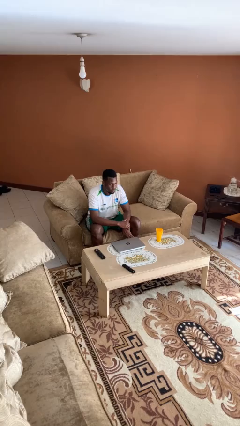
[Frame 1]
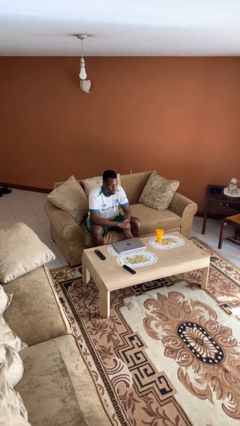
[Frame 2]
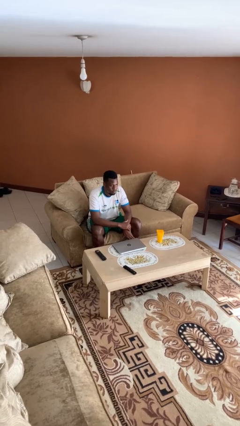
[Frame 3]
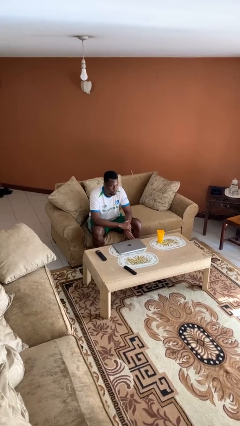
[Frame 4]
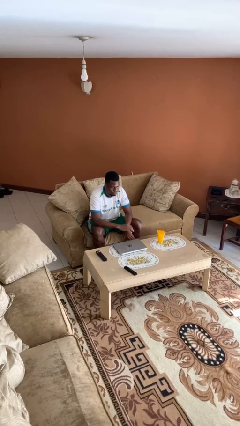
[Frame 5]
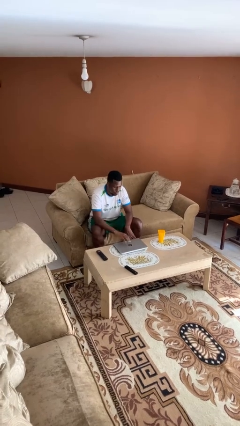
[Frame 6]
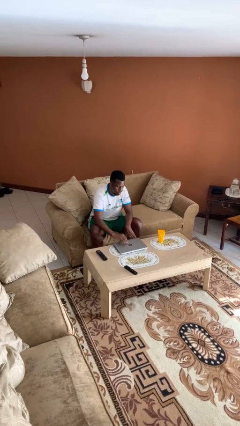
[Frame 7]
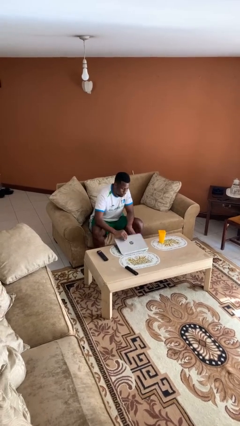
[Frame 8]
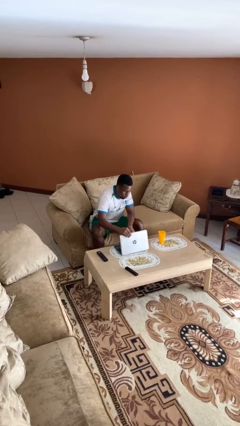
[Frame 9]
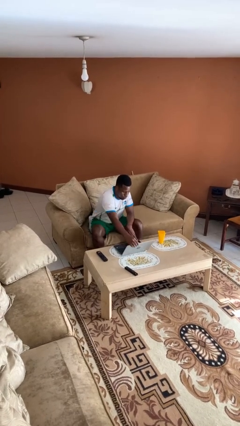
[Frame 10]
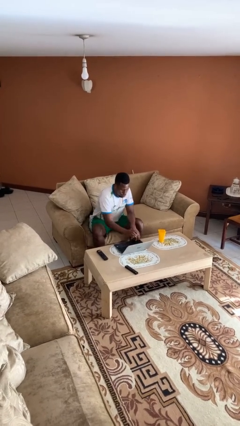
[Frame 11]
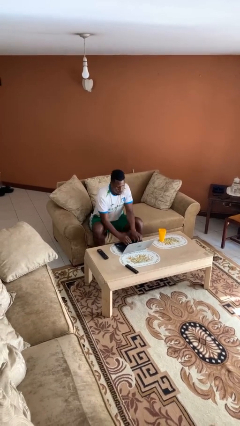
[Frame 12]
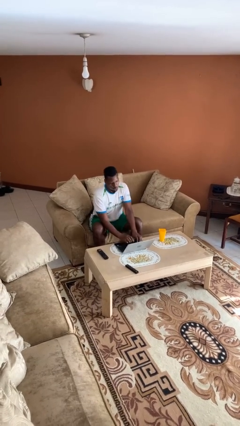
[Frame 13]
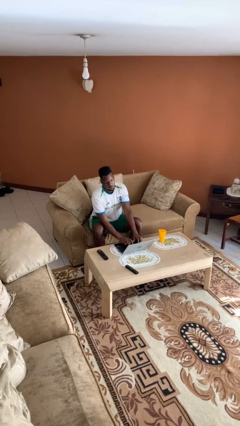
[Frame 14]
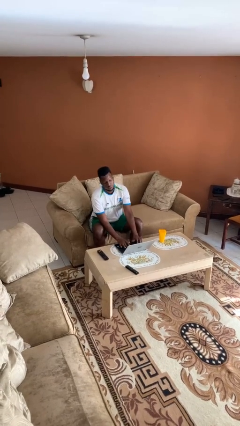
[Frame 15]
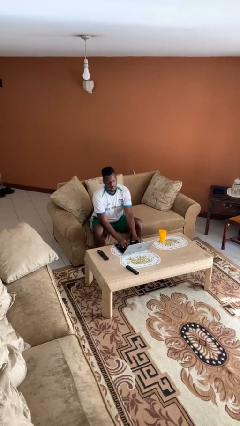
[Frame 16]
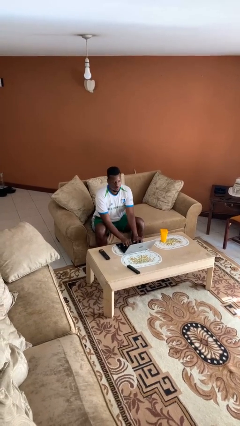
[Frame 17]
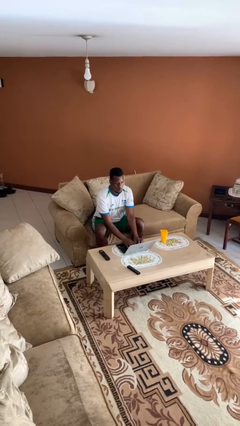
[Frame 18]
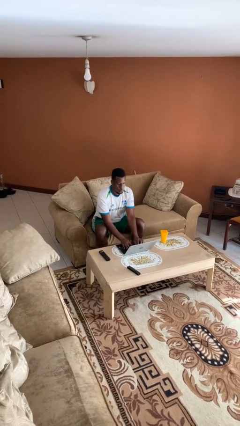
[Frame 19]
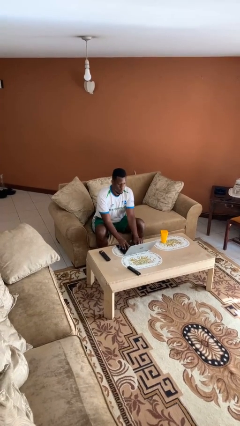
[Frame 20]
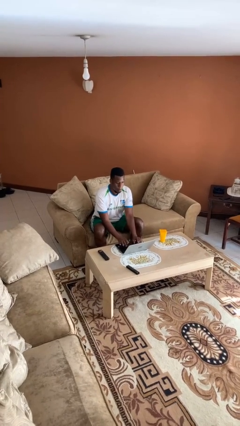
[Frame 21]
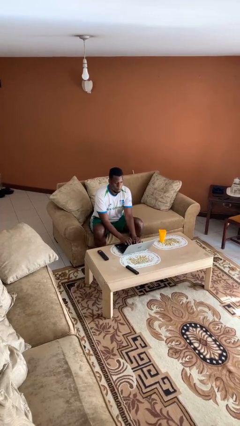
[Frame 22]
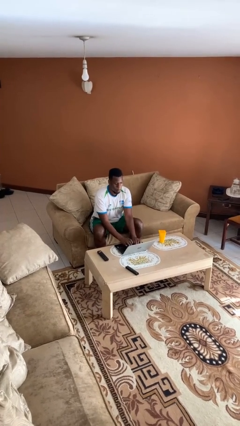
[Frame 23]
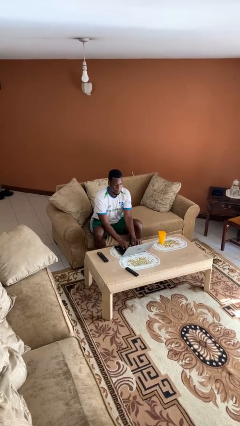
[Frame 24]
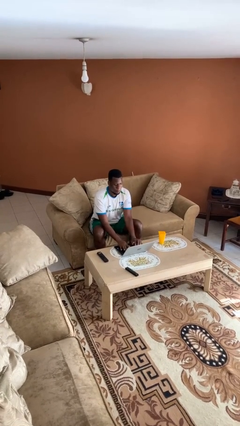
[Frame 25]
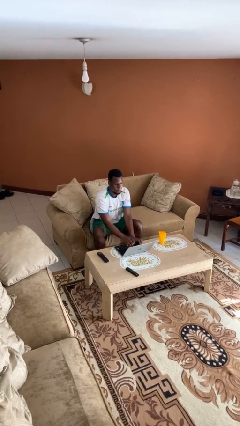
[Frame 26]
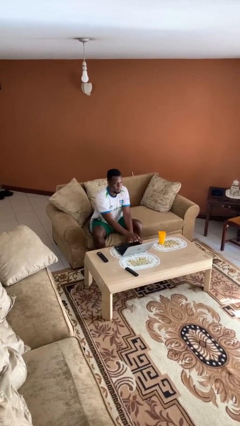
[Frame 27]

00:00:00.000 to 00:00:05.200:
person interacts with laptop

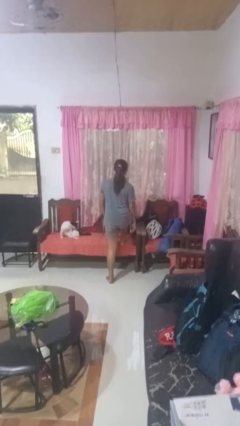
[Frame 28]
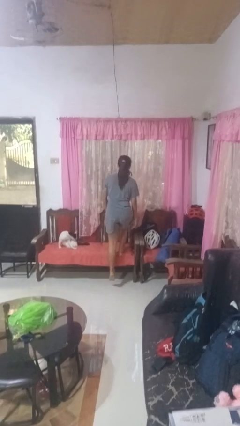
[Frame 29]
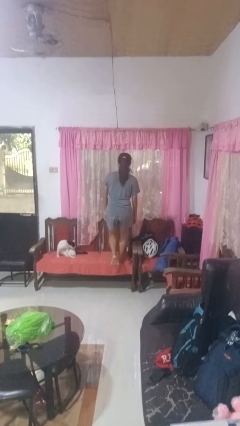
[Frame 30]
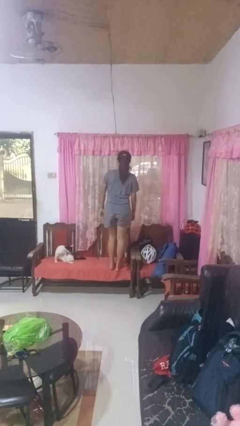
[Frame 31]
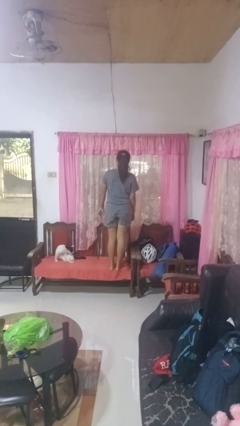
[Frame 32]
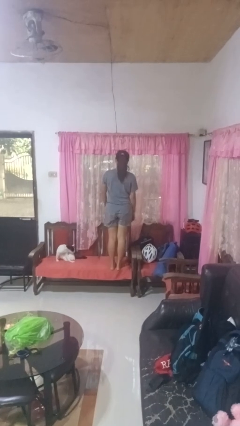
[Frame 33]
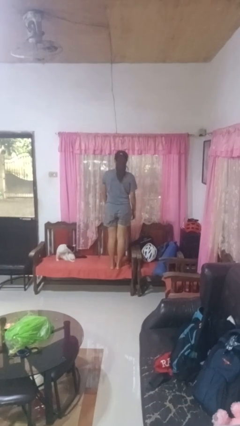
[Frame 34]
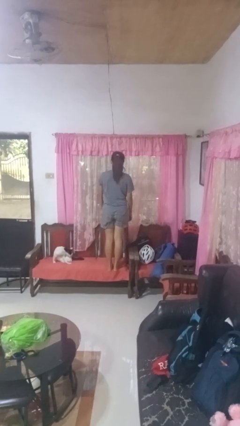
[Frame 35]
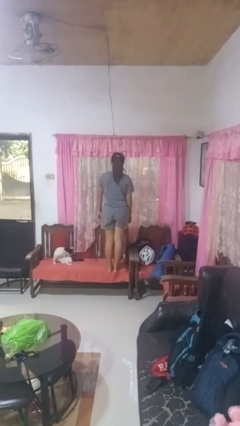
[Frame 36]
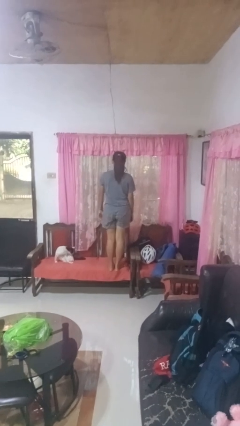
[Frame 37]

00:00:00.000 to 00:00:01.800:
person climbs on chair

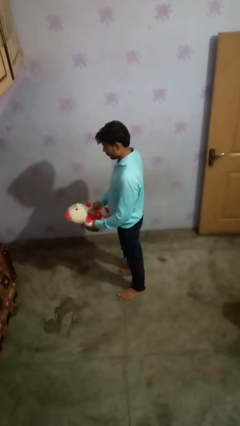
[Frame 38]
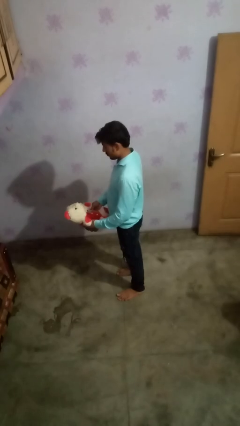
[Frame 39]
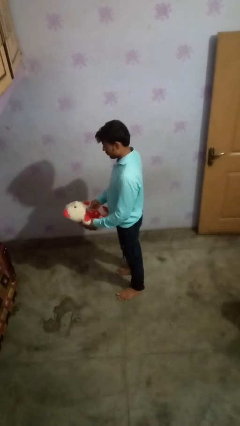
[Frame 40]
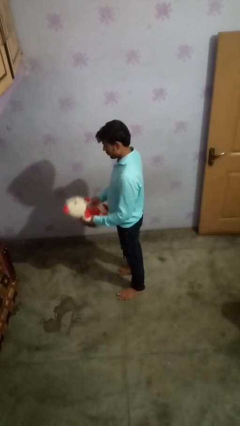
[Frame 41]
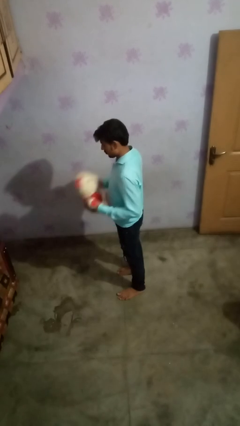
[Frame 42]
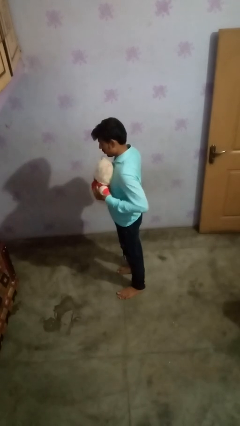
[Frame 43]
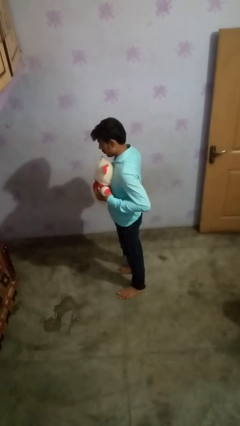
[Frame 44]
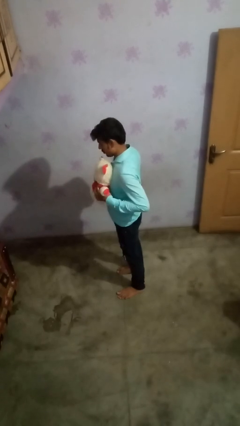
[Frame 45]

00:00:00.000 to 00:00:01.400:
person hugs stuffed animal

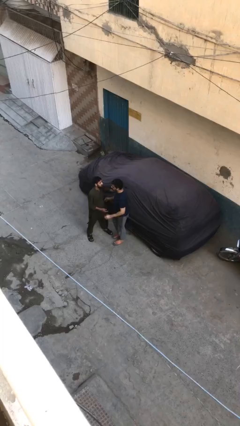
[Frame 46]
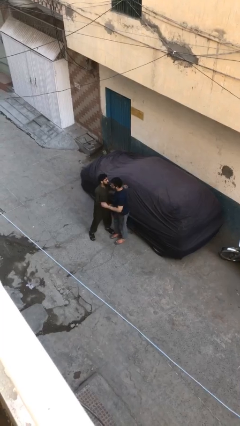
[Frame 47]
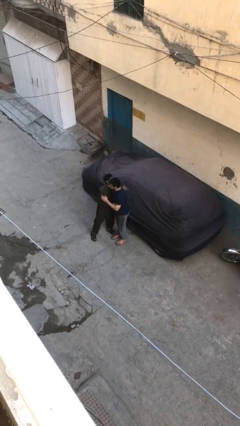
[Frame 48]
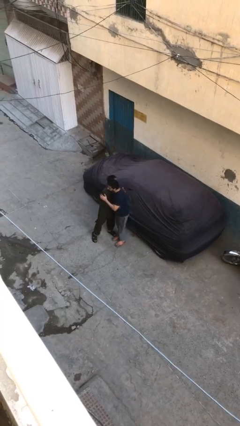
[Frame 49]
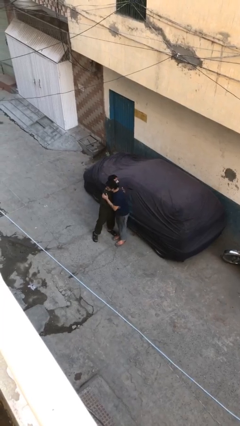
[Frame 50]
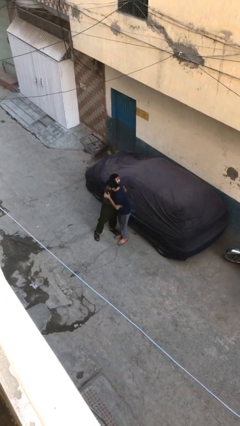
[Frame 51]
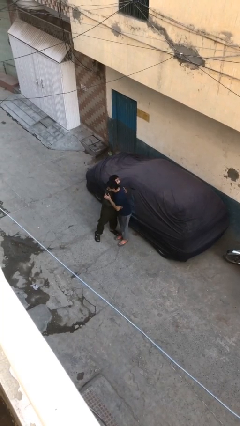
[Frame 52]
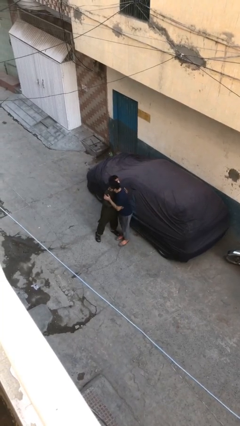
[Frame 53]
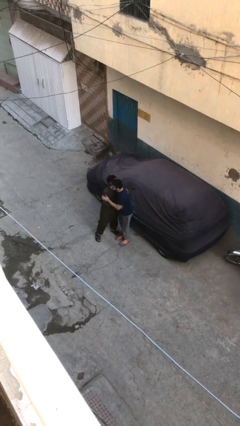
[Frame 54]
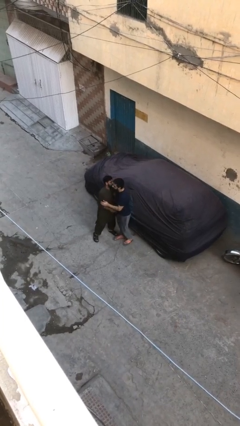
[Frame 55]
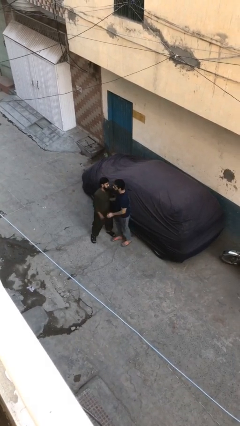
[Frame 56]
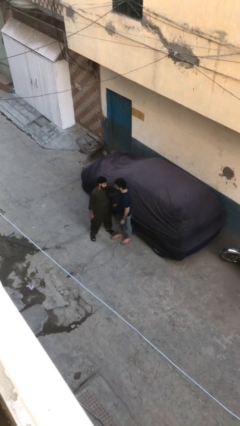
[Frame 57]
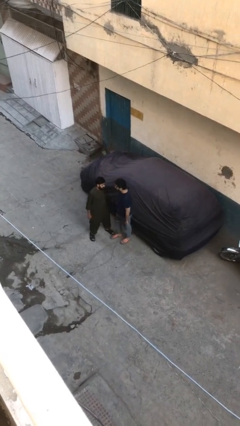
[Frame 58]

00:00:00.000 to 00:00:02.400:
person embraces person

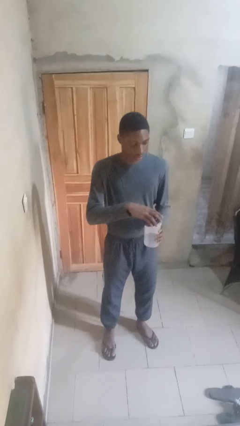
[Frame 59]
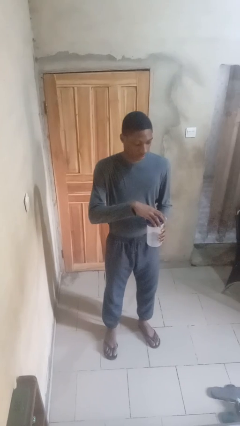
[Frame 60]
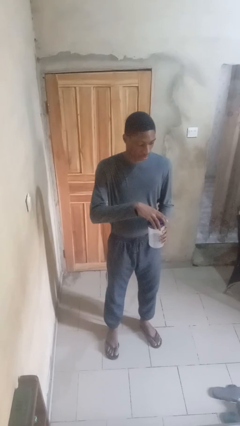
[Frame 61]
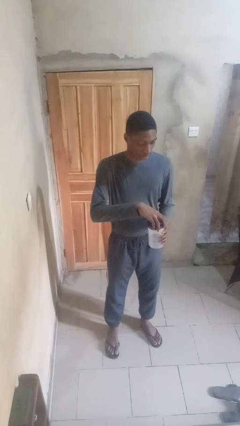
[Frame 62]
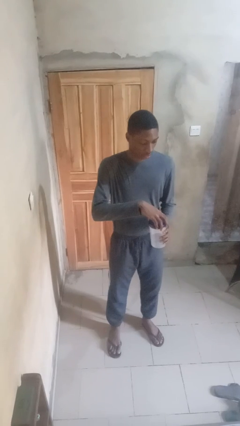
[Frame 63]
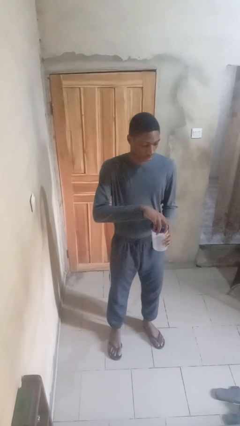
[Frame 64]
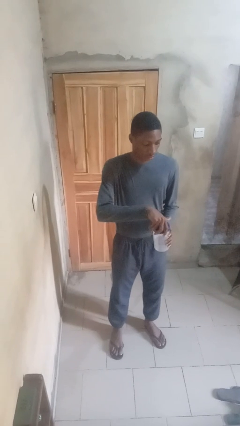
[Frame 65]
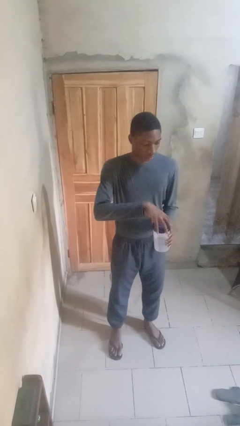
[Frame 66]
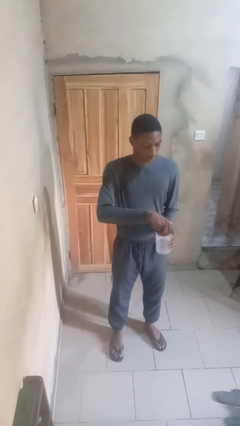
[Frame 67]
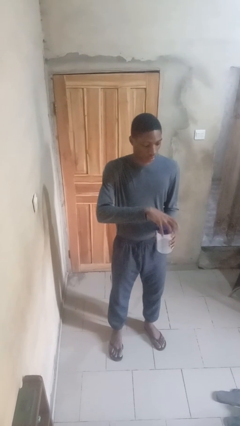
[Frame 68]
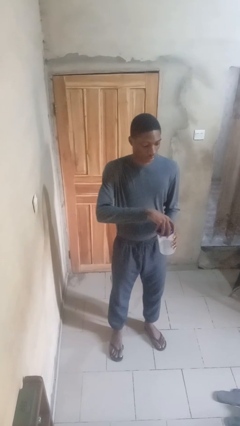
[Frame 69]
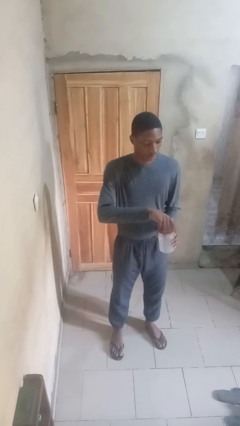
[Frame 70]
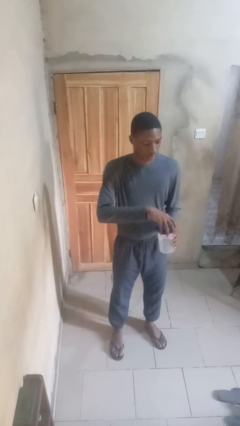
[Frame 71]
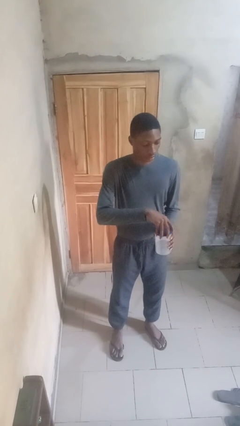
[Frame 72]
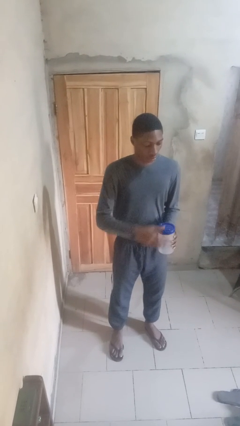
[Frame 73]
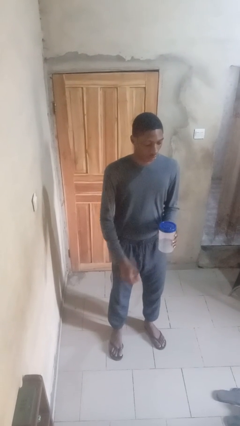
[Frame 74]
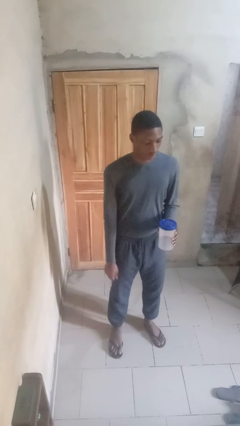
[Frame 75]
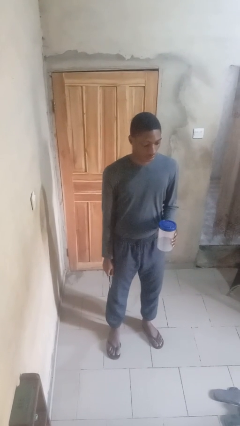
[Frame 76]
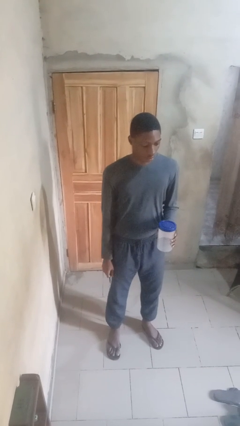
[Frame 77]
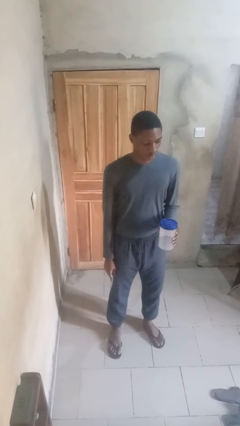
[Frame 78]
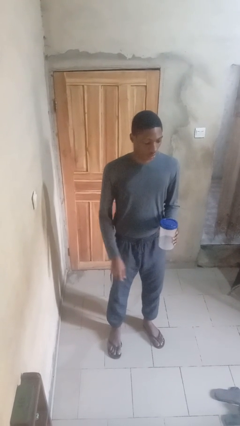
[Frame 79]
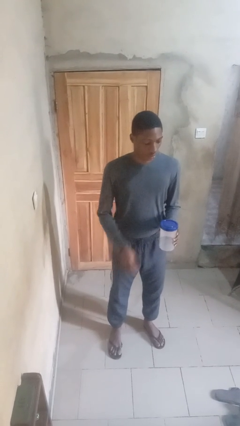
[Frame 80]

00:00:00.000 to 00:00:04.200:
person closes jar

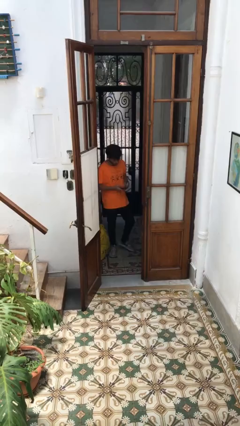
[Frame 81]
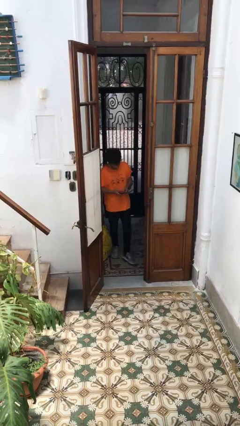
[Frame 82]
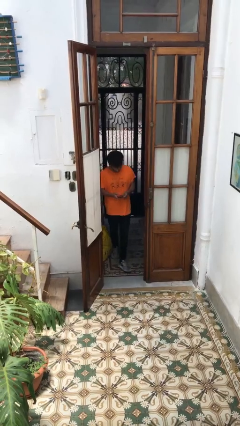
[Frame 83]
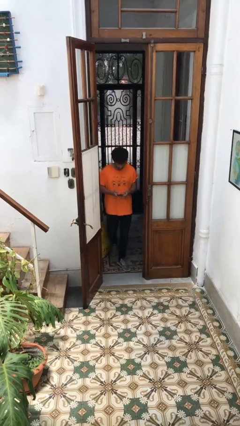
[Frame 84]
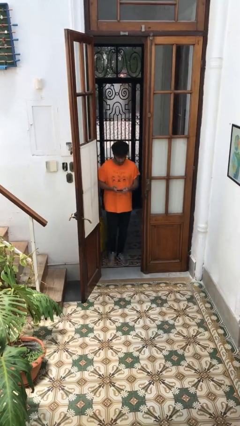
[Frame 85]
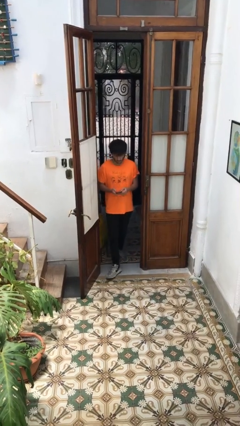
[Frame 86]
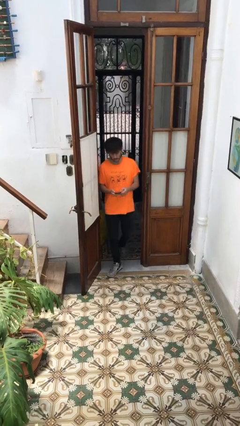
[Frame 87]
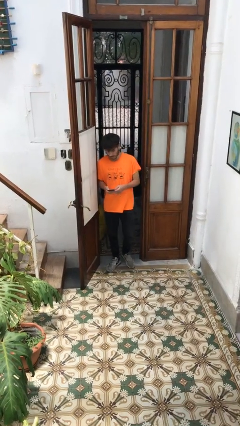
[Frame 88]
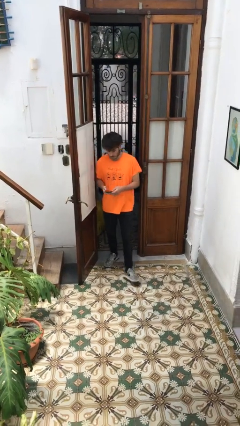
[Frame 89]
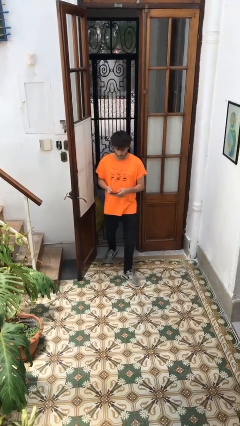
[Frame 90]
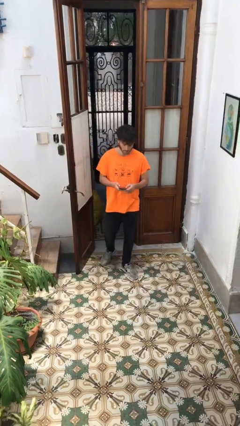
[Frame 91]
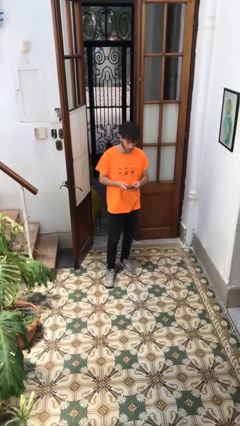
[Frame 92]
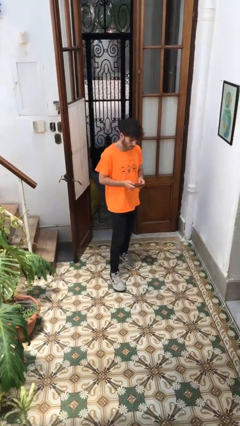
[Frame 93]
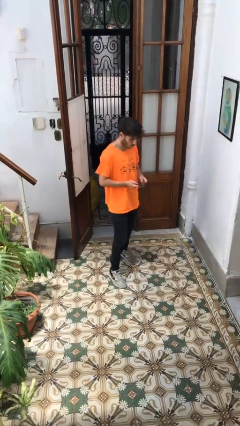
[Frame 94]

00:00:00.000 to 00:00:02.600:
person enters scene through structure
